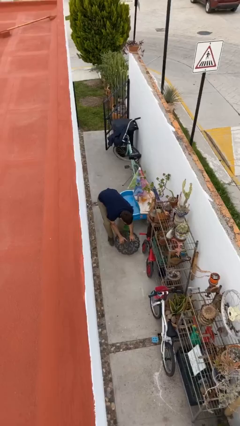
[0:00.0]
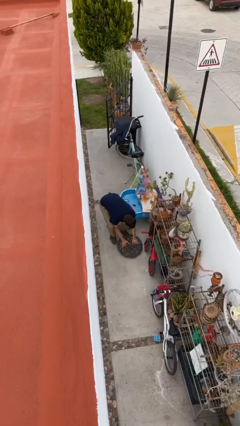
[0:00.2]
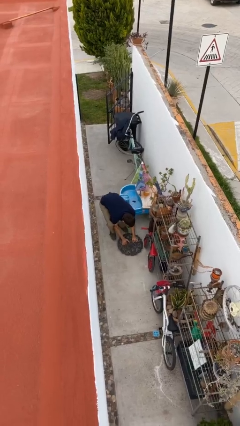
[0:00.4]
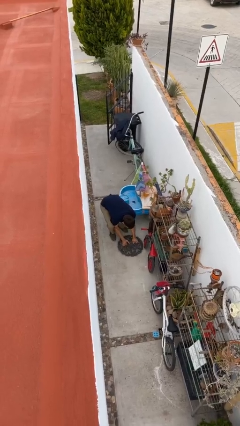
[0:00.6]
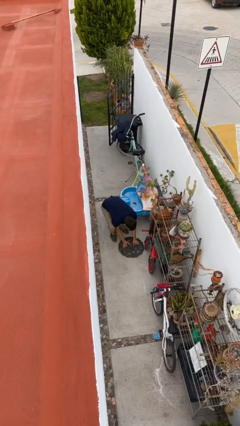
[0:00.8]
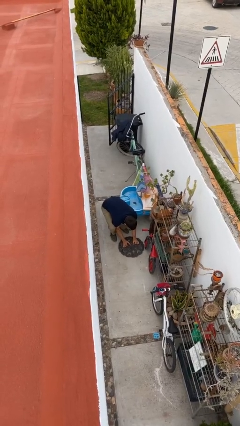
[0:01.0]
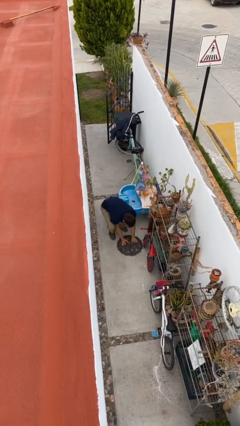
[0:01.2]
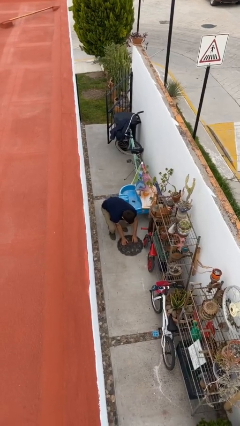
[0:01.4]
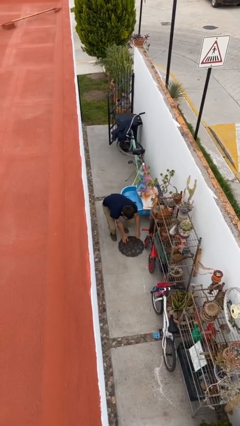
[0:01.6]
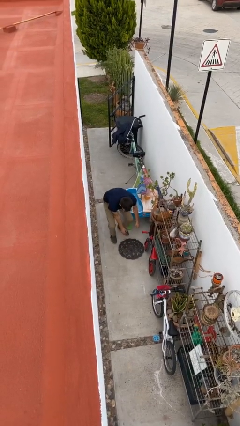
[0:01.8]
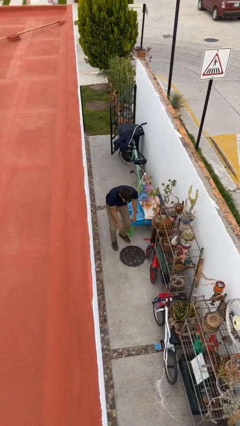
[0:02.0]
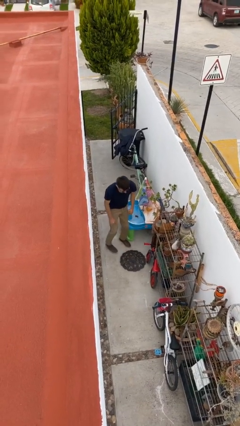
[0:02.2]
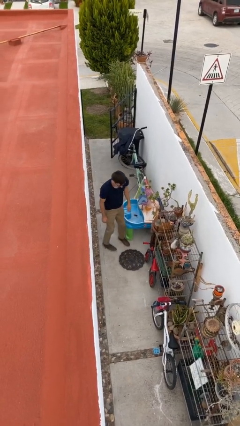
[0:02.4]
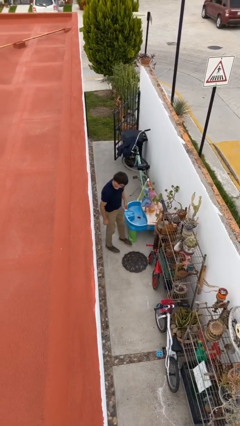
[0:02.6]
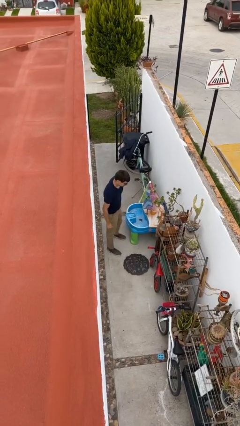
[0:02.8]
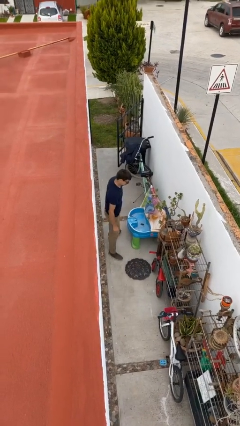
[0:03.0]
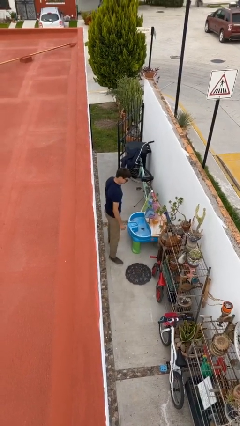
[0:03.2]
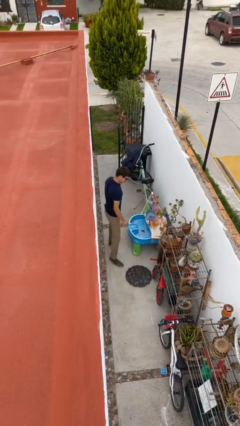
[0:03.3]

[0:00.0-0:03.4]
person puts down object on floor

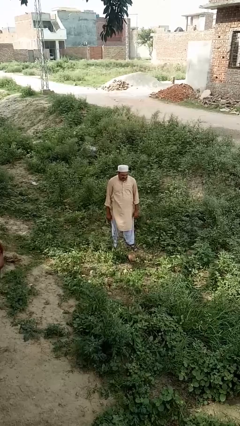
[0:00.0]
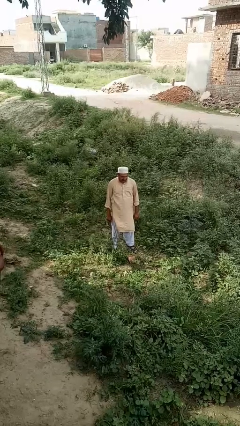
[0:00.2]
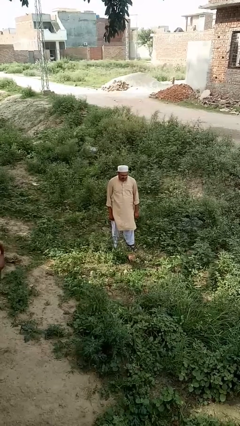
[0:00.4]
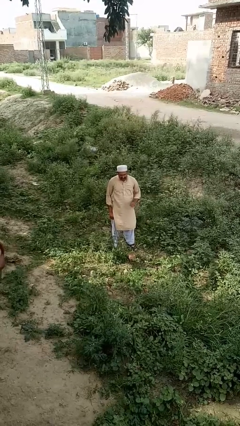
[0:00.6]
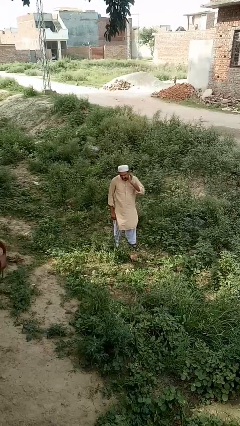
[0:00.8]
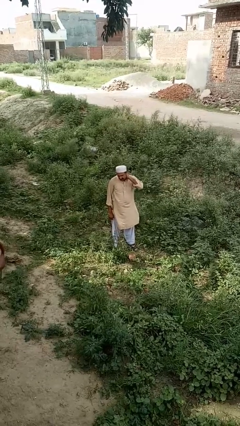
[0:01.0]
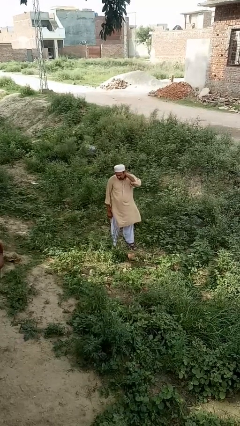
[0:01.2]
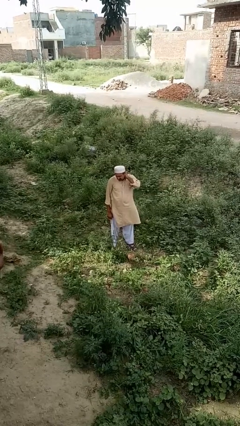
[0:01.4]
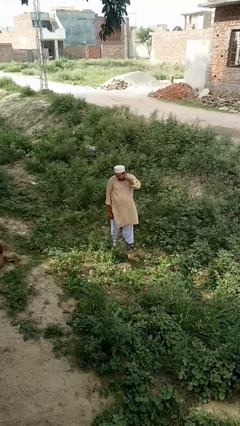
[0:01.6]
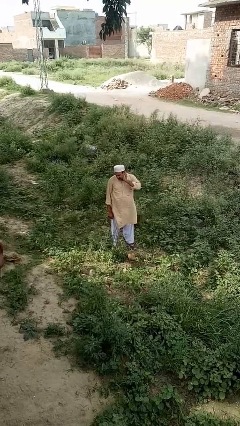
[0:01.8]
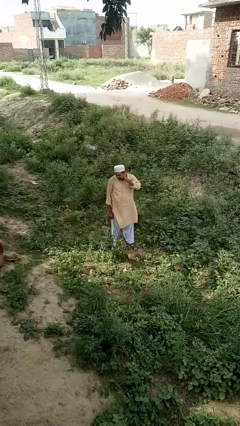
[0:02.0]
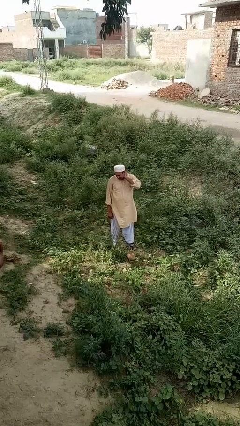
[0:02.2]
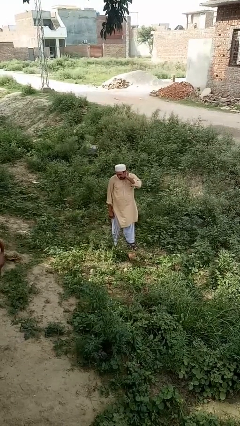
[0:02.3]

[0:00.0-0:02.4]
person rubs neck

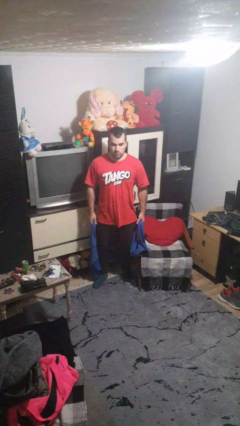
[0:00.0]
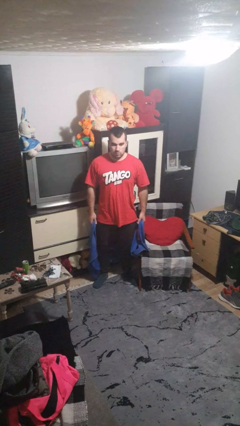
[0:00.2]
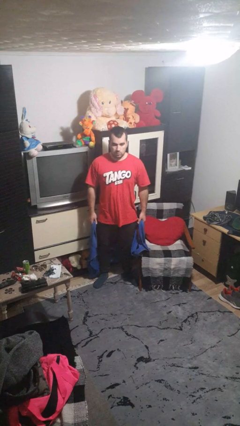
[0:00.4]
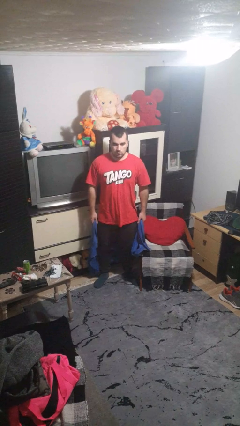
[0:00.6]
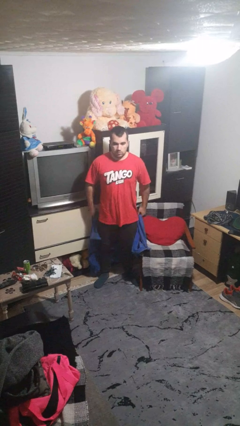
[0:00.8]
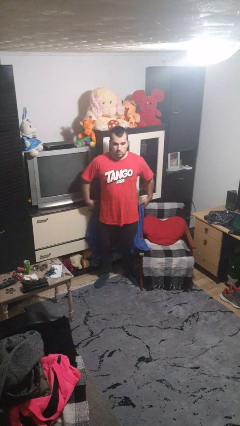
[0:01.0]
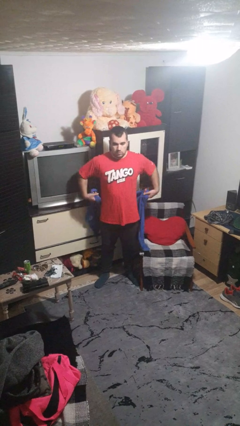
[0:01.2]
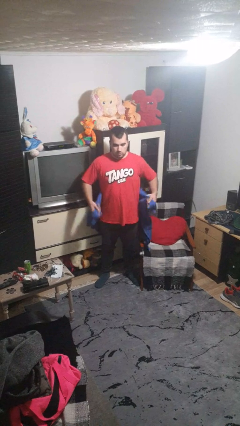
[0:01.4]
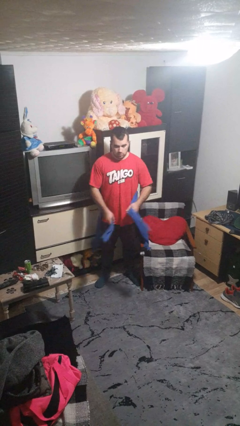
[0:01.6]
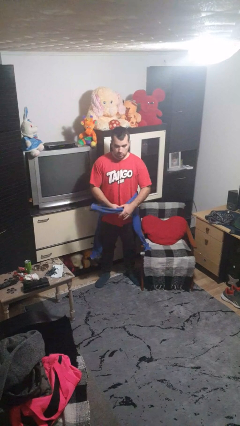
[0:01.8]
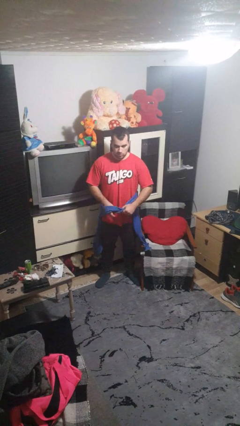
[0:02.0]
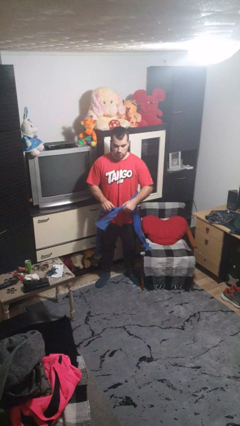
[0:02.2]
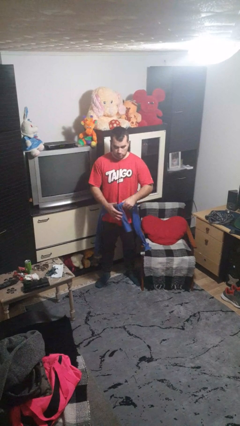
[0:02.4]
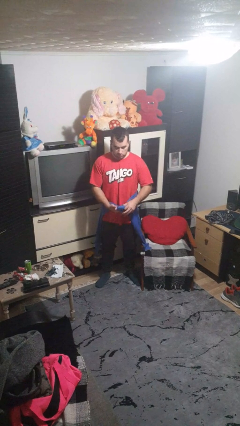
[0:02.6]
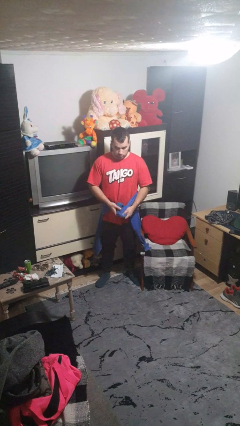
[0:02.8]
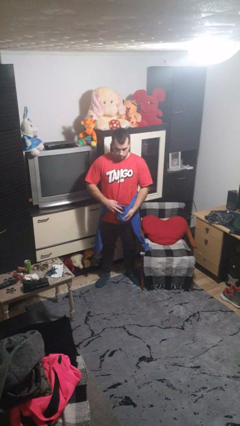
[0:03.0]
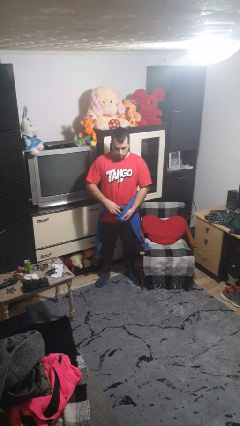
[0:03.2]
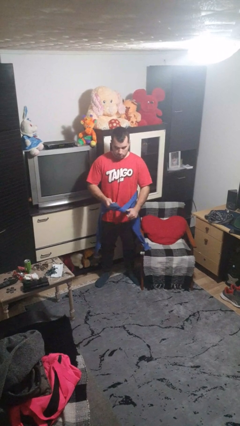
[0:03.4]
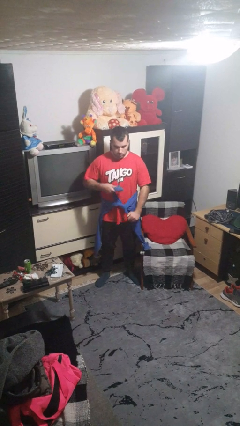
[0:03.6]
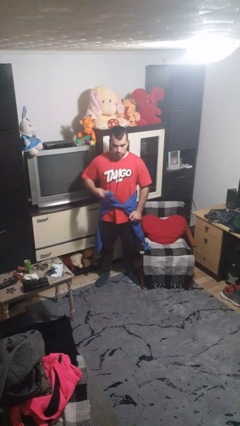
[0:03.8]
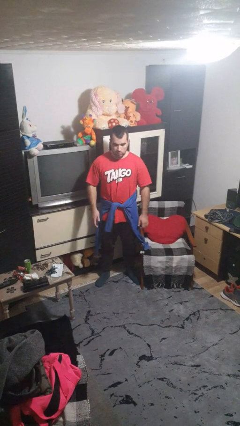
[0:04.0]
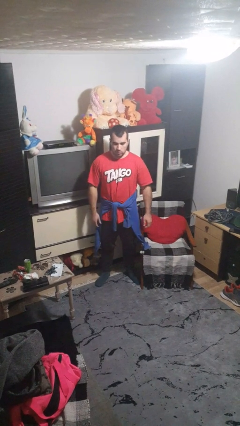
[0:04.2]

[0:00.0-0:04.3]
person ties jacket around waist

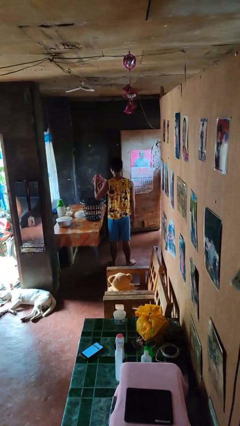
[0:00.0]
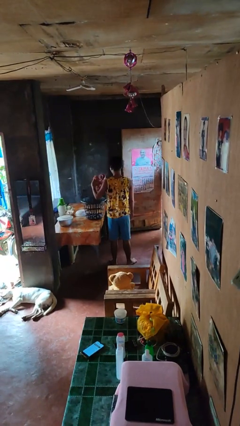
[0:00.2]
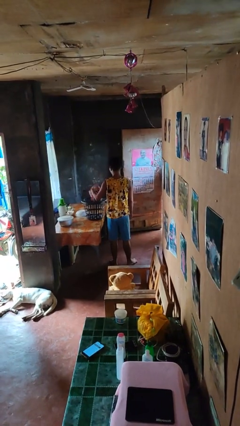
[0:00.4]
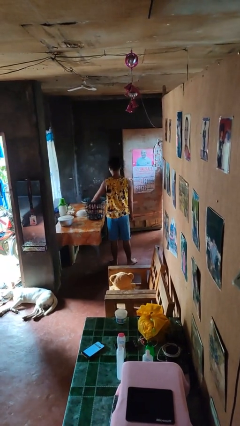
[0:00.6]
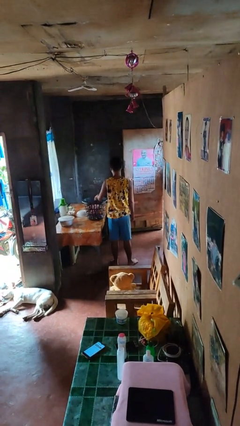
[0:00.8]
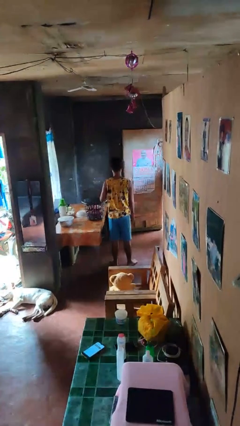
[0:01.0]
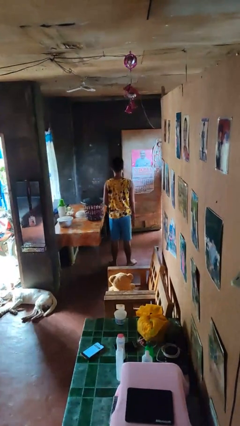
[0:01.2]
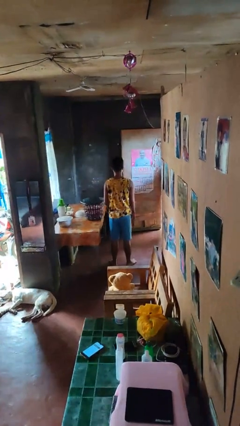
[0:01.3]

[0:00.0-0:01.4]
person puts object into basket

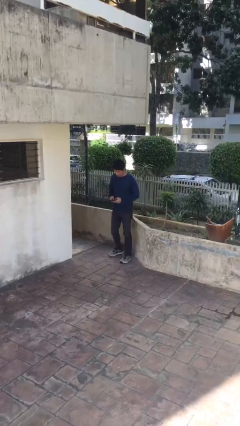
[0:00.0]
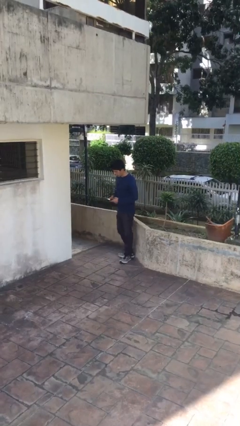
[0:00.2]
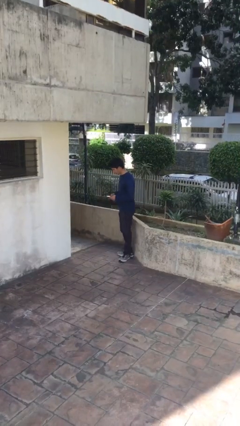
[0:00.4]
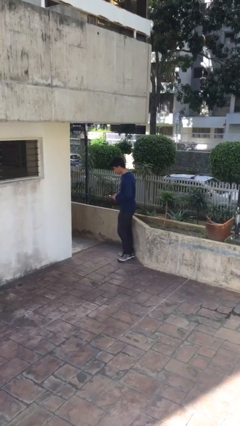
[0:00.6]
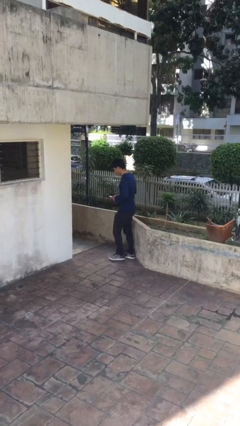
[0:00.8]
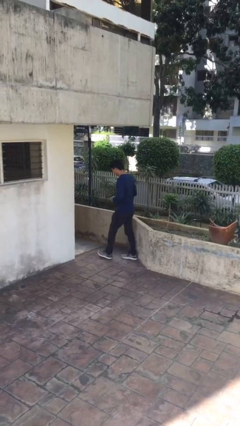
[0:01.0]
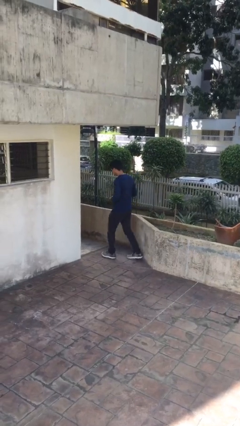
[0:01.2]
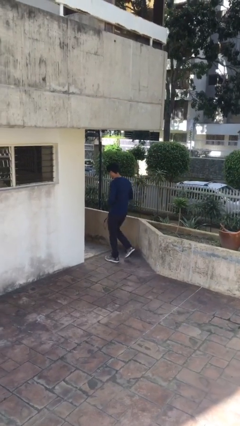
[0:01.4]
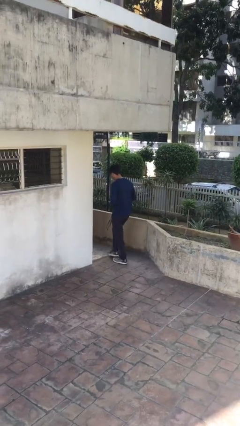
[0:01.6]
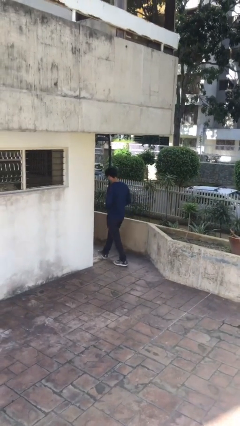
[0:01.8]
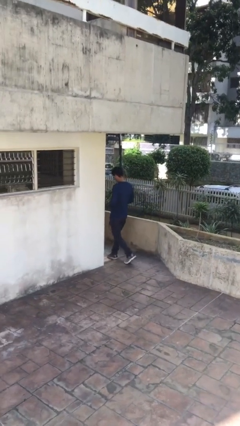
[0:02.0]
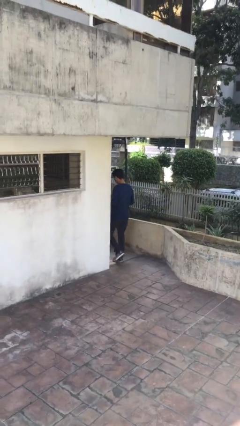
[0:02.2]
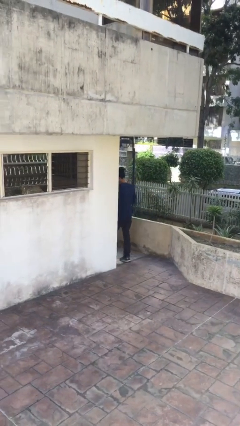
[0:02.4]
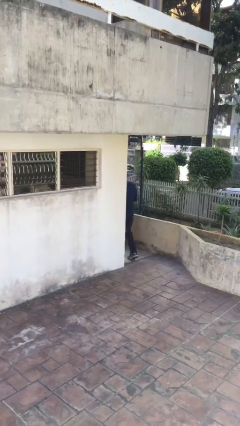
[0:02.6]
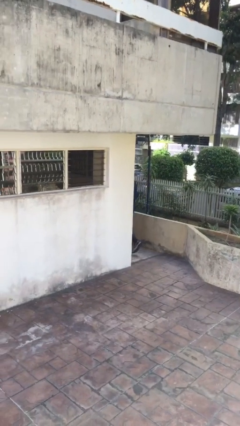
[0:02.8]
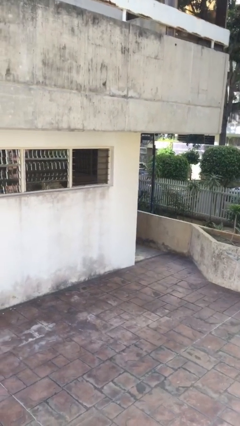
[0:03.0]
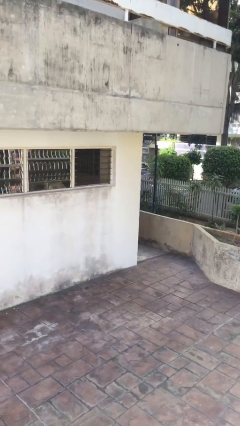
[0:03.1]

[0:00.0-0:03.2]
person exits scene through structure

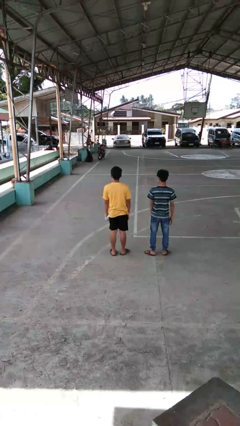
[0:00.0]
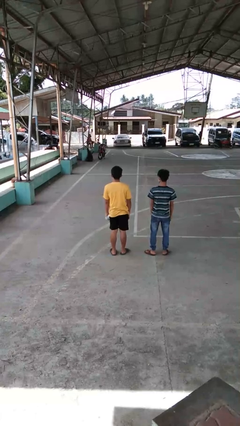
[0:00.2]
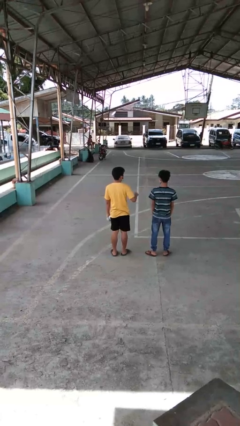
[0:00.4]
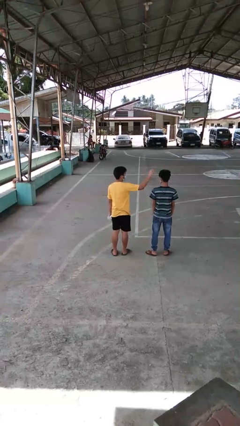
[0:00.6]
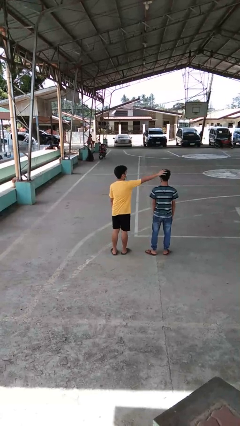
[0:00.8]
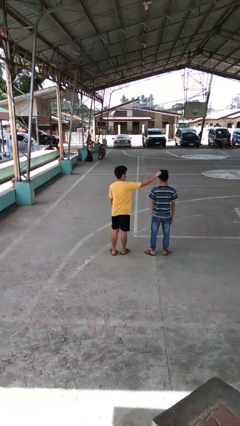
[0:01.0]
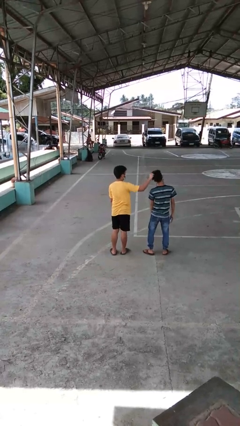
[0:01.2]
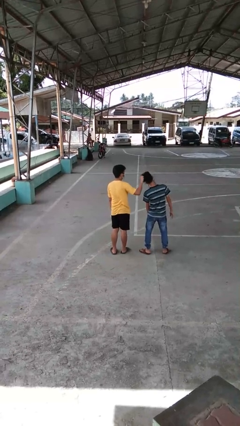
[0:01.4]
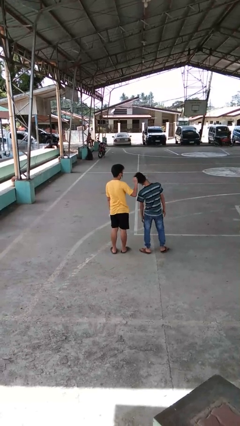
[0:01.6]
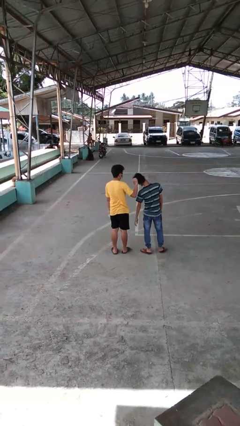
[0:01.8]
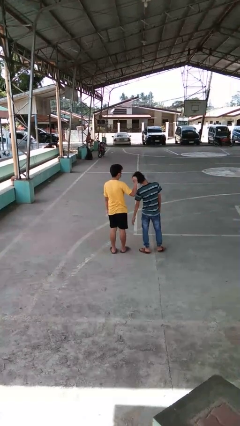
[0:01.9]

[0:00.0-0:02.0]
person grabs person by hair

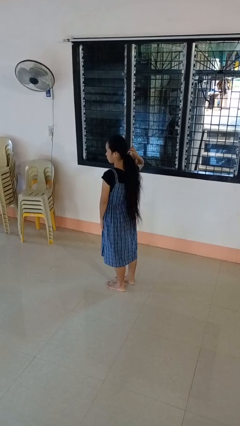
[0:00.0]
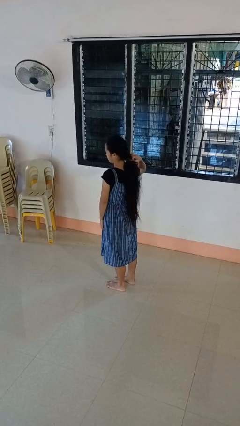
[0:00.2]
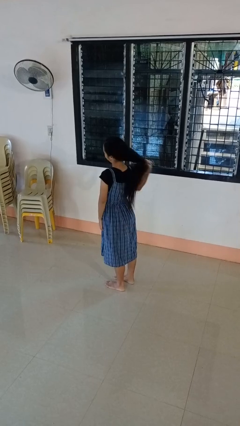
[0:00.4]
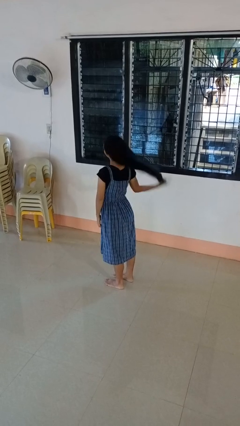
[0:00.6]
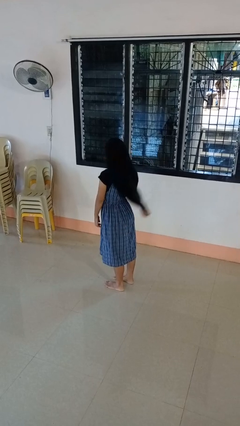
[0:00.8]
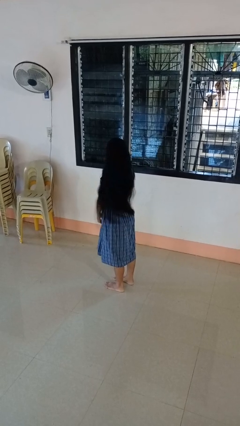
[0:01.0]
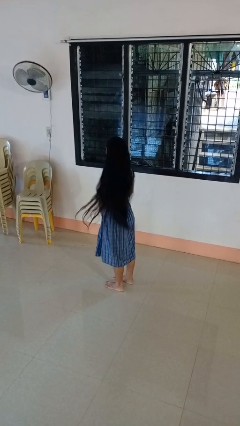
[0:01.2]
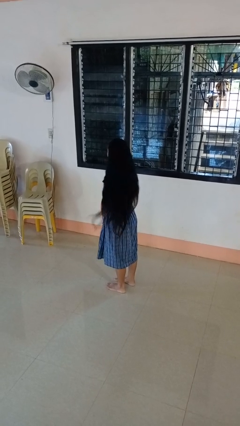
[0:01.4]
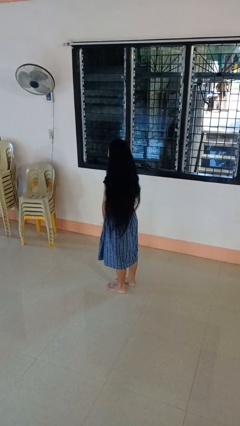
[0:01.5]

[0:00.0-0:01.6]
person takes off hairtie
